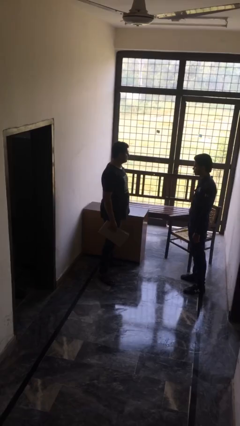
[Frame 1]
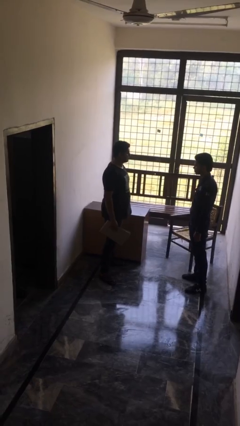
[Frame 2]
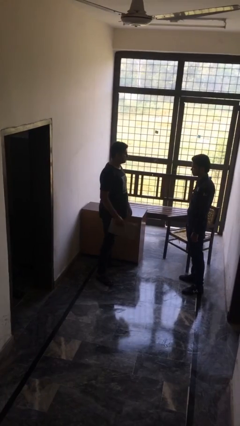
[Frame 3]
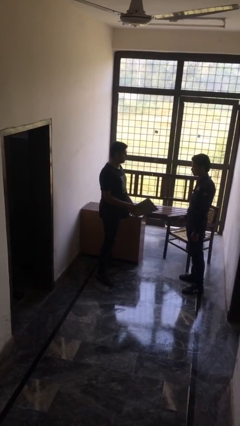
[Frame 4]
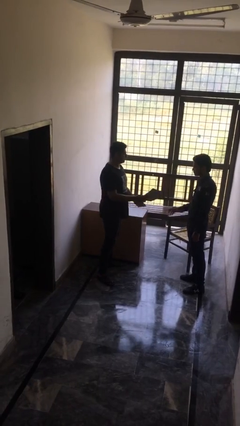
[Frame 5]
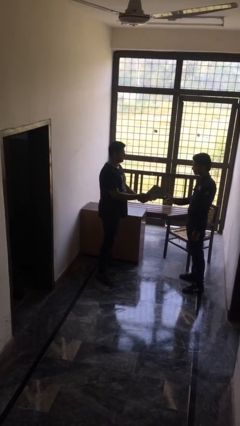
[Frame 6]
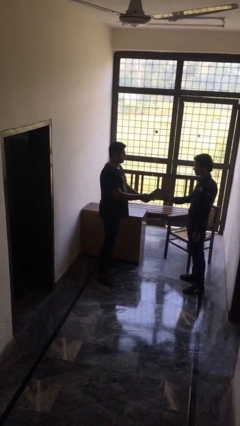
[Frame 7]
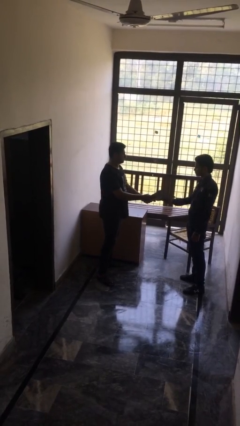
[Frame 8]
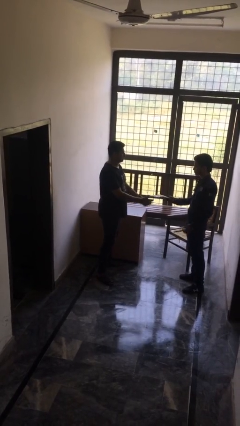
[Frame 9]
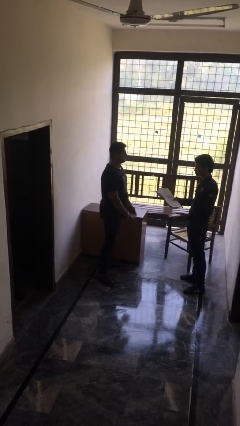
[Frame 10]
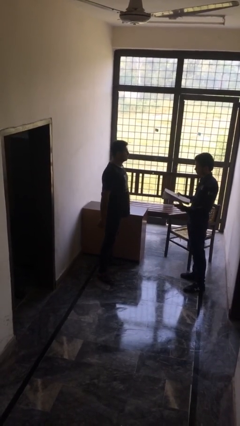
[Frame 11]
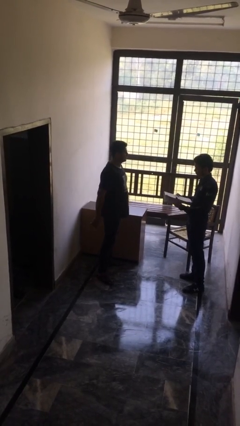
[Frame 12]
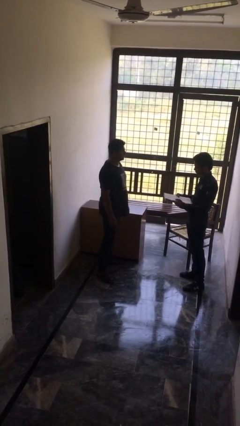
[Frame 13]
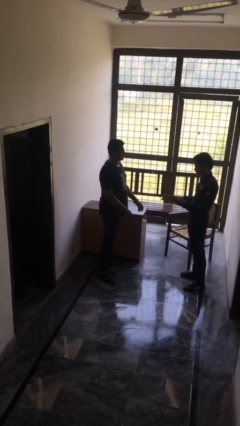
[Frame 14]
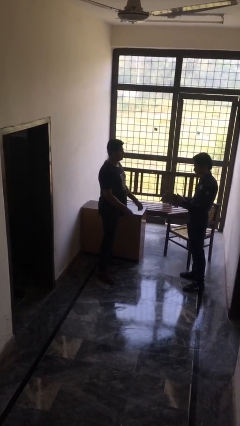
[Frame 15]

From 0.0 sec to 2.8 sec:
person transfers object to person

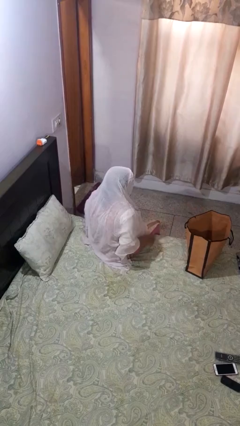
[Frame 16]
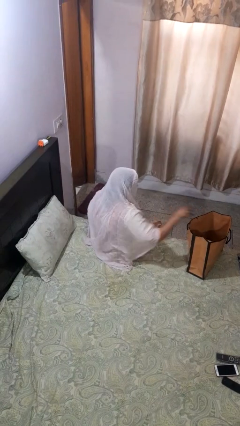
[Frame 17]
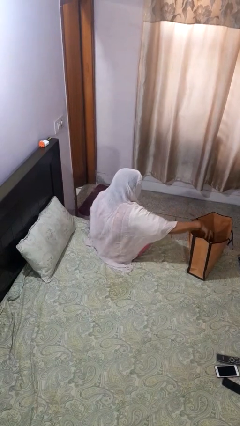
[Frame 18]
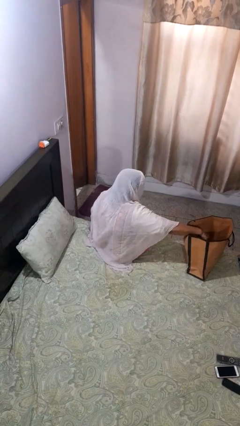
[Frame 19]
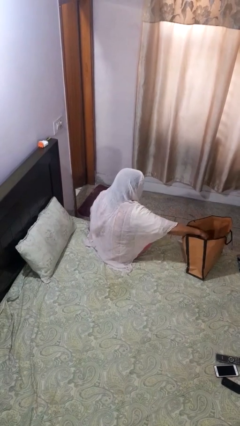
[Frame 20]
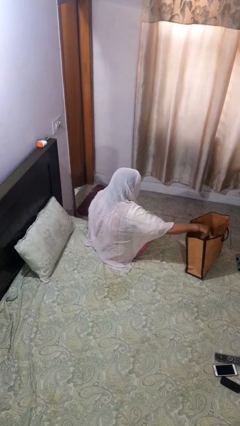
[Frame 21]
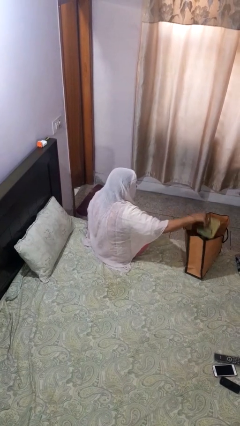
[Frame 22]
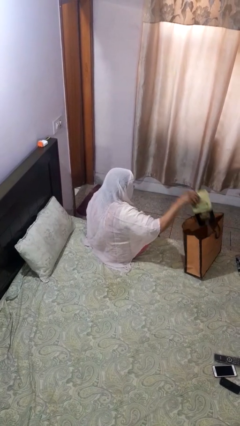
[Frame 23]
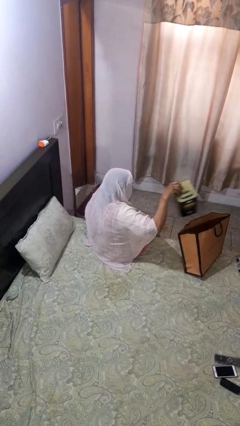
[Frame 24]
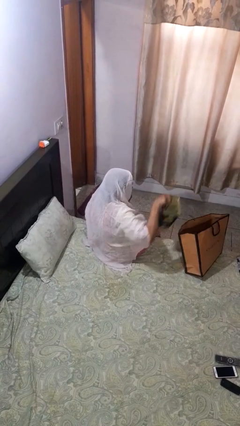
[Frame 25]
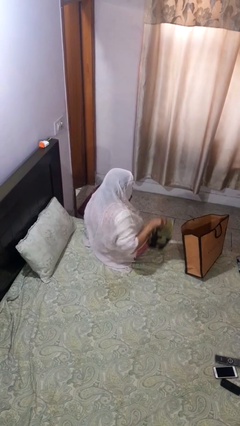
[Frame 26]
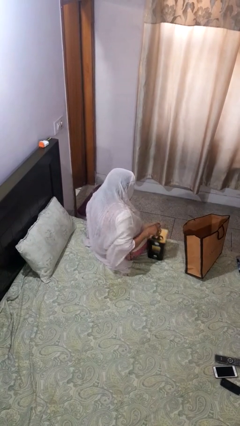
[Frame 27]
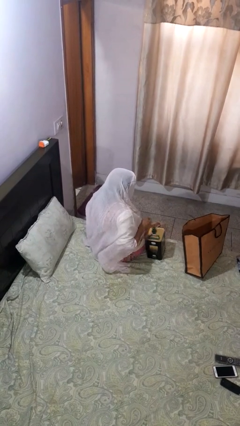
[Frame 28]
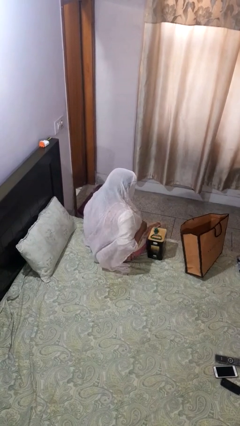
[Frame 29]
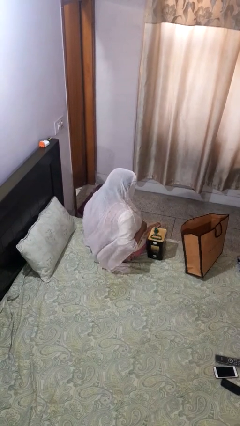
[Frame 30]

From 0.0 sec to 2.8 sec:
person takes object from bag

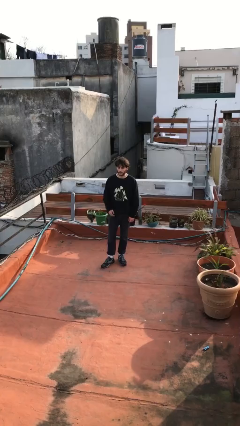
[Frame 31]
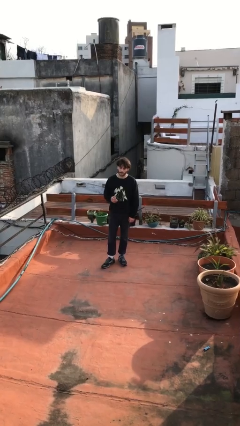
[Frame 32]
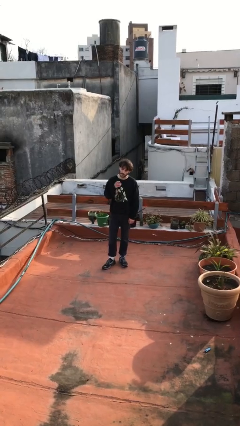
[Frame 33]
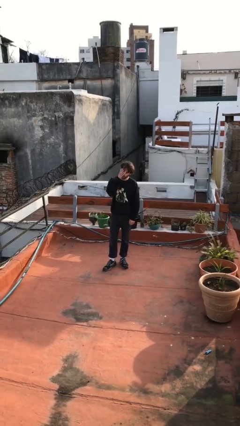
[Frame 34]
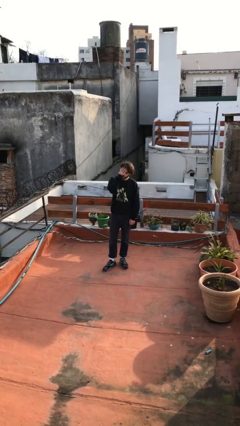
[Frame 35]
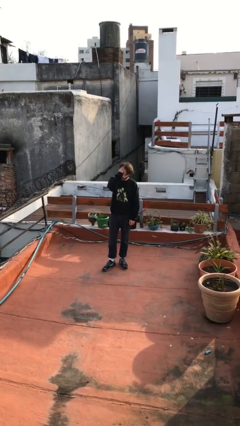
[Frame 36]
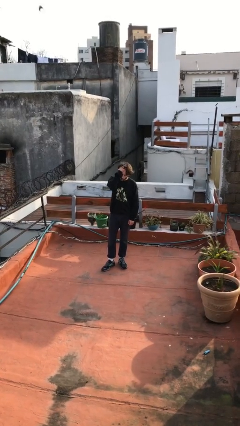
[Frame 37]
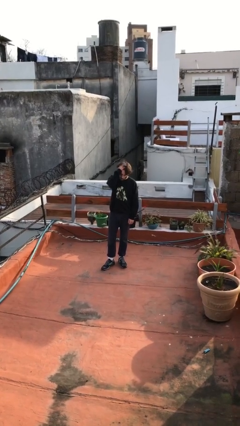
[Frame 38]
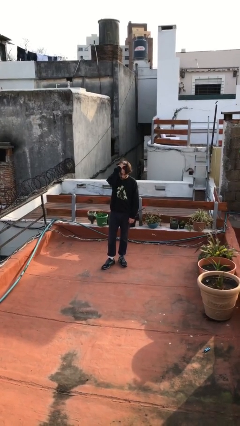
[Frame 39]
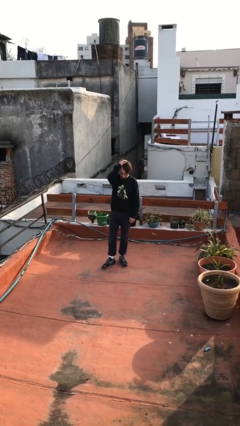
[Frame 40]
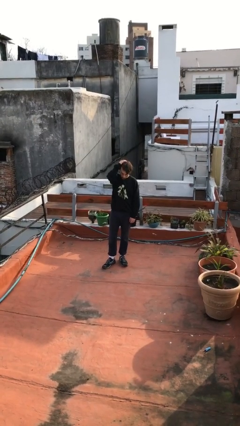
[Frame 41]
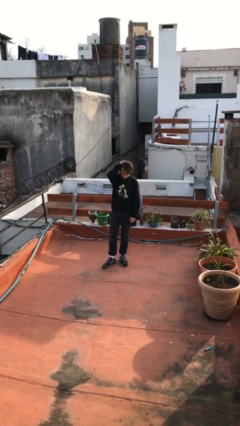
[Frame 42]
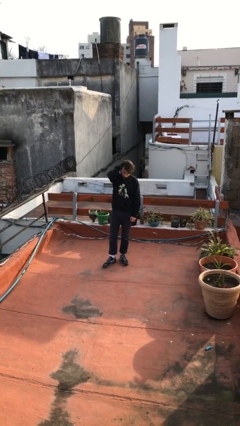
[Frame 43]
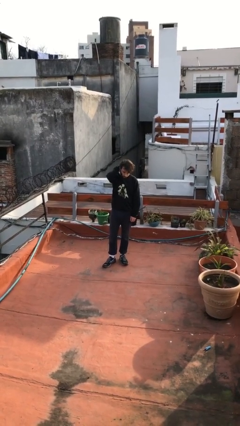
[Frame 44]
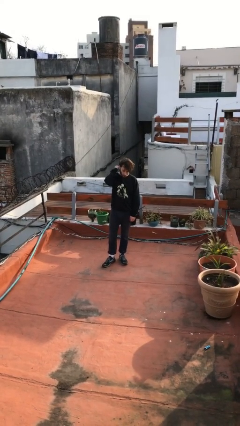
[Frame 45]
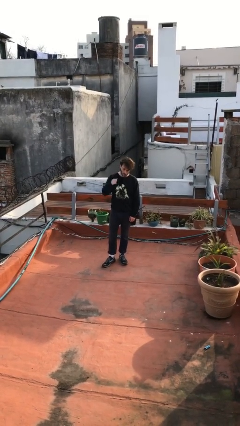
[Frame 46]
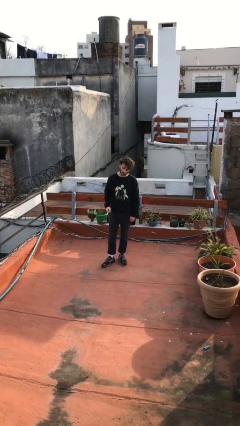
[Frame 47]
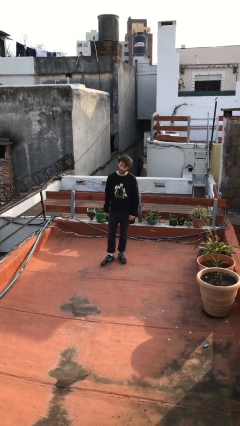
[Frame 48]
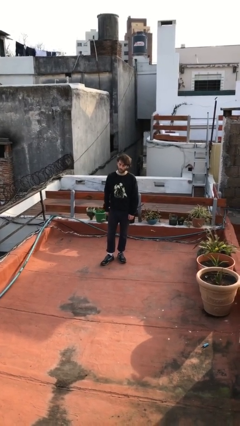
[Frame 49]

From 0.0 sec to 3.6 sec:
person scratches face

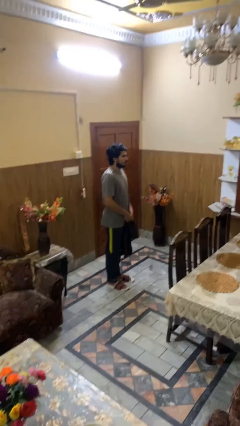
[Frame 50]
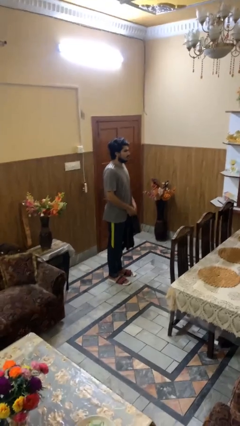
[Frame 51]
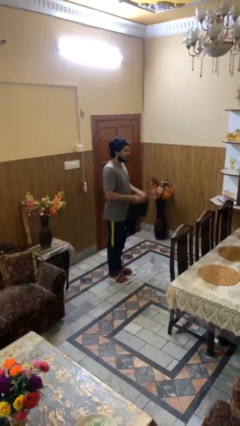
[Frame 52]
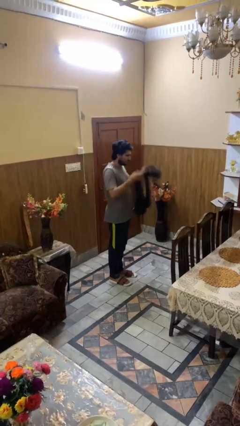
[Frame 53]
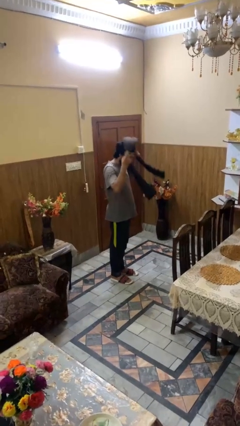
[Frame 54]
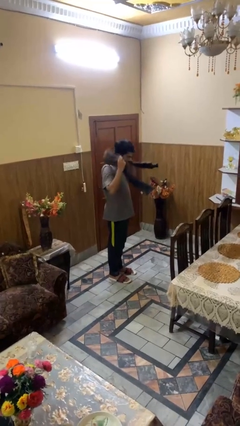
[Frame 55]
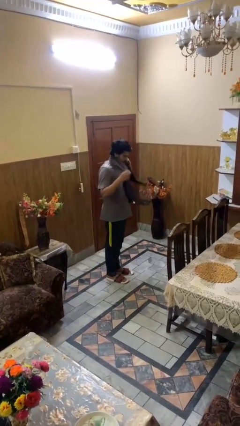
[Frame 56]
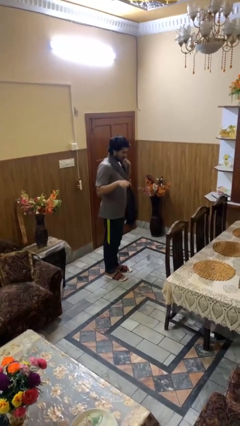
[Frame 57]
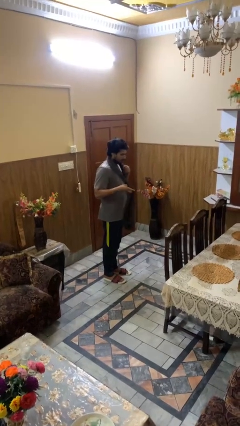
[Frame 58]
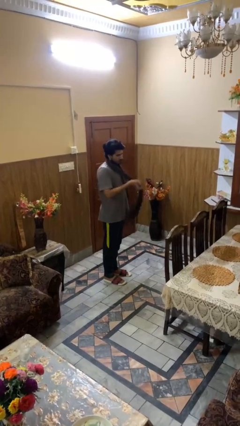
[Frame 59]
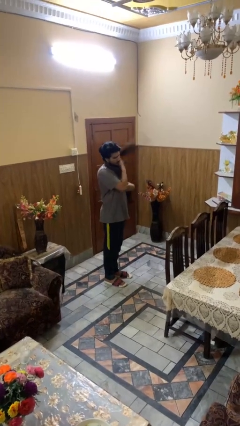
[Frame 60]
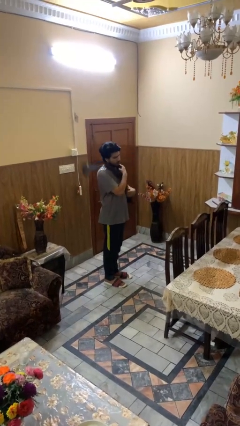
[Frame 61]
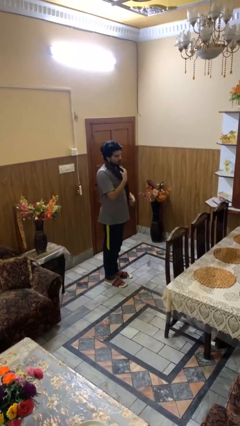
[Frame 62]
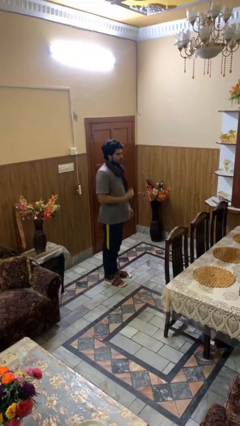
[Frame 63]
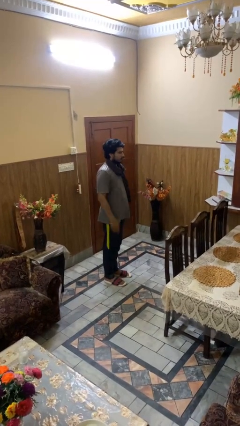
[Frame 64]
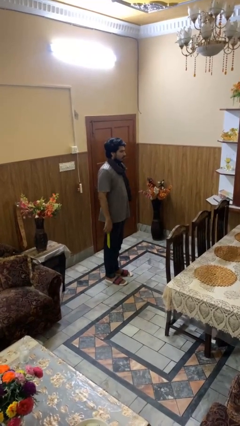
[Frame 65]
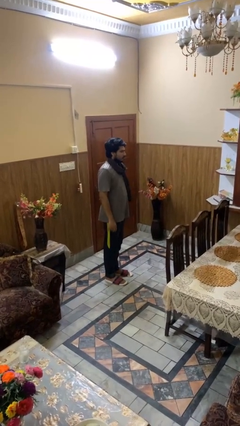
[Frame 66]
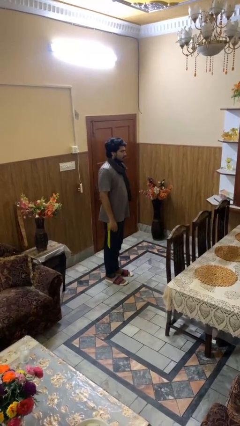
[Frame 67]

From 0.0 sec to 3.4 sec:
person puts on scarf

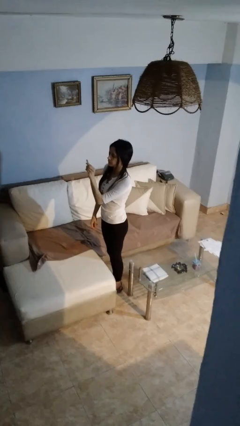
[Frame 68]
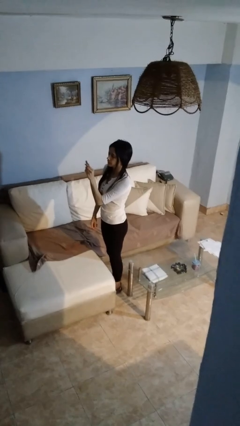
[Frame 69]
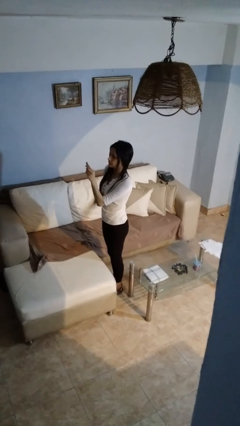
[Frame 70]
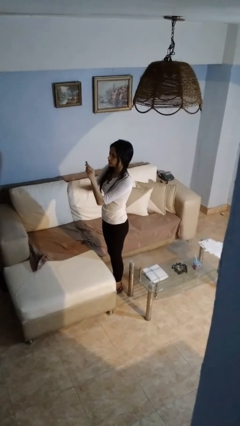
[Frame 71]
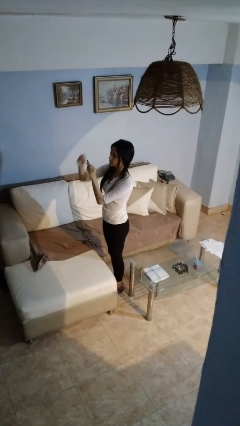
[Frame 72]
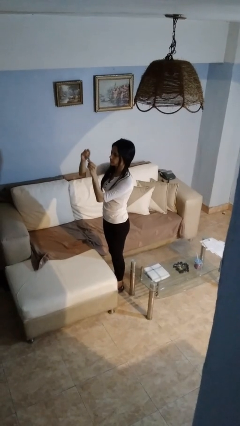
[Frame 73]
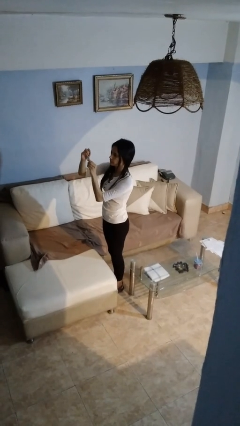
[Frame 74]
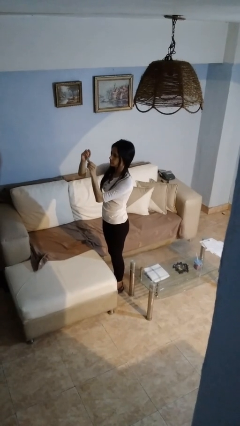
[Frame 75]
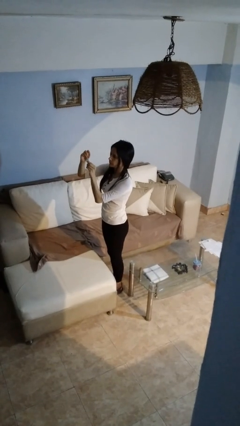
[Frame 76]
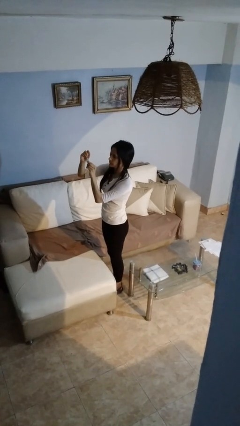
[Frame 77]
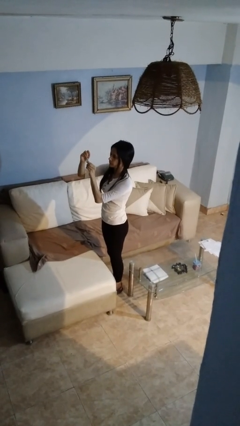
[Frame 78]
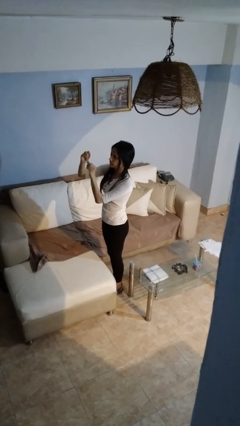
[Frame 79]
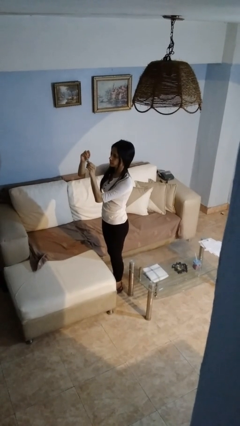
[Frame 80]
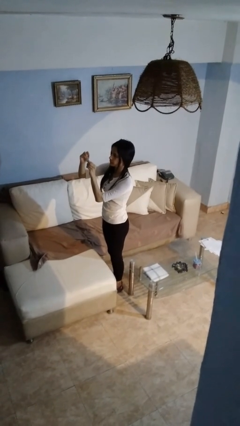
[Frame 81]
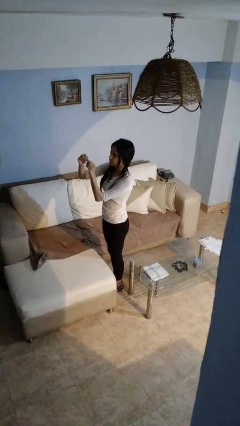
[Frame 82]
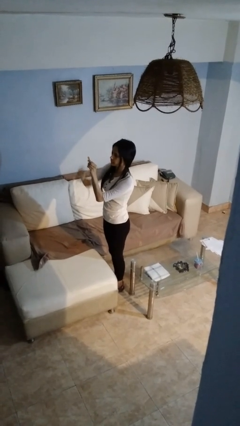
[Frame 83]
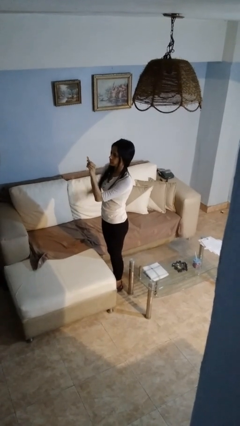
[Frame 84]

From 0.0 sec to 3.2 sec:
person clips fingernails

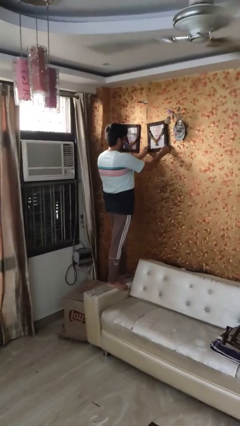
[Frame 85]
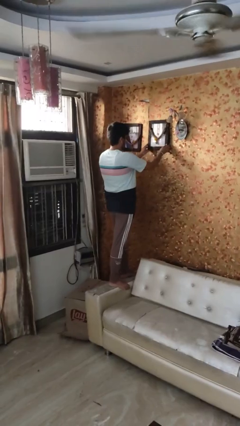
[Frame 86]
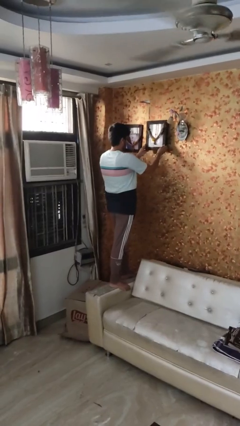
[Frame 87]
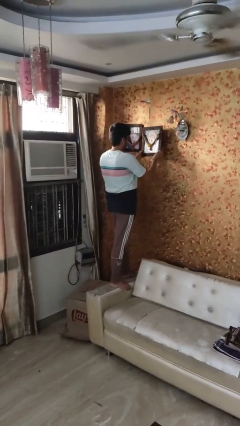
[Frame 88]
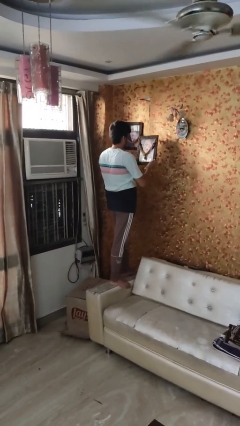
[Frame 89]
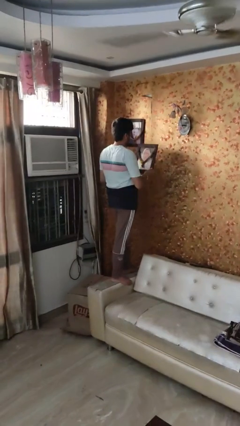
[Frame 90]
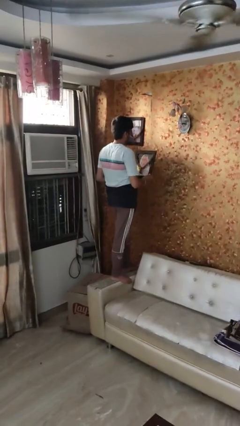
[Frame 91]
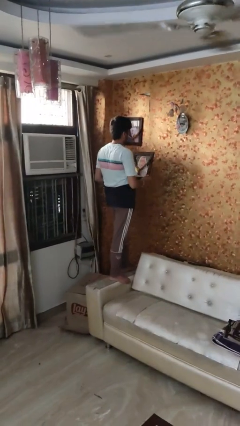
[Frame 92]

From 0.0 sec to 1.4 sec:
person takes down picture frame
